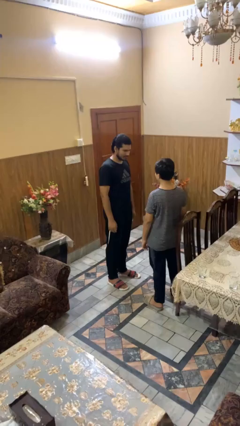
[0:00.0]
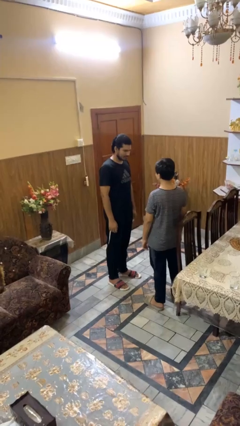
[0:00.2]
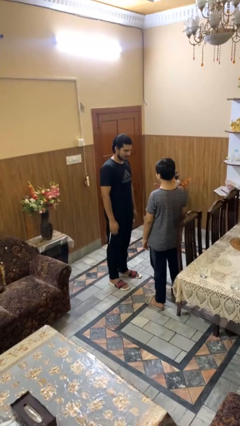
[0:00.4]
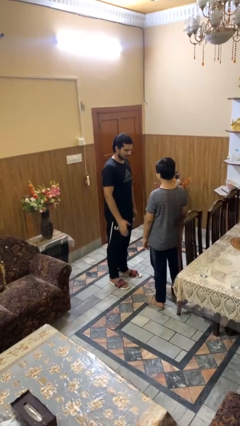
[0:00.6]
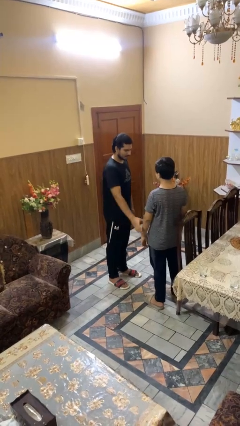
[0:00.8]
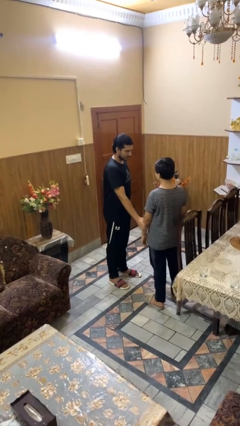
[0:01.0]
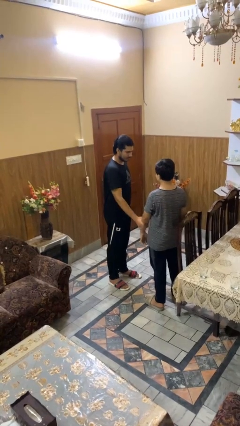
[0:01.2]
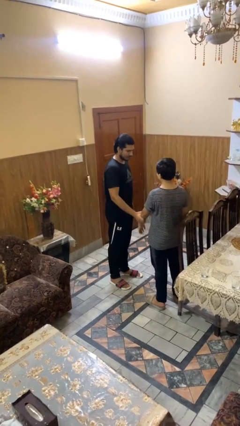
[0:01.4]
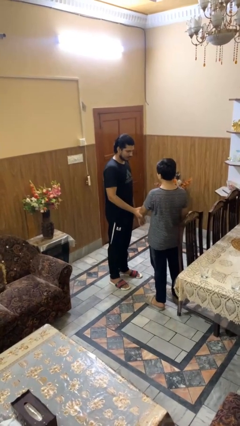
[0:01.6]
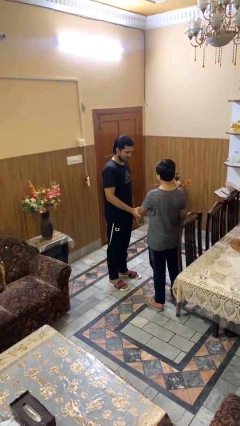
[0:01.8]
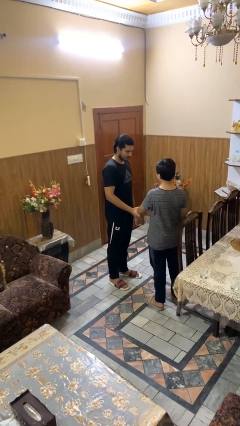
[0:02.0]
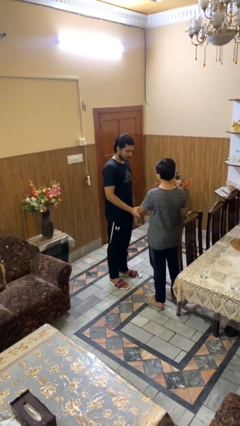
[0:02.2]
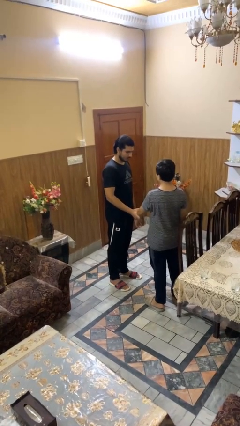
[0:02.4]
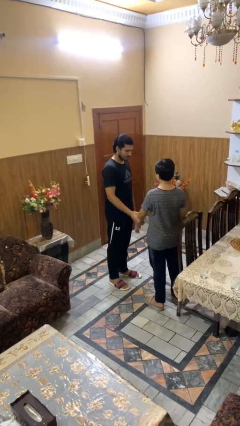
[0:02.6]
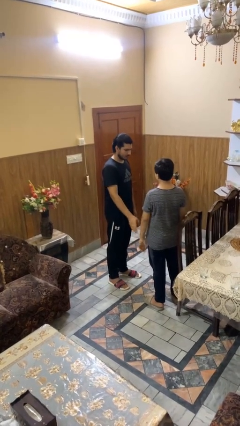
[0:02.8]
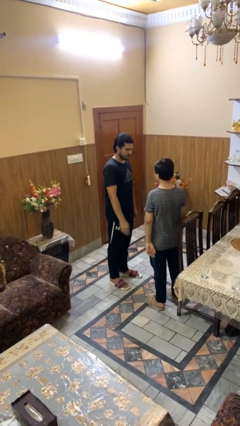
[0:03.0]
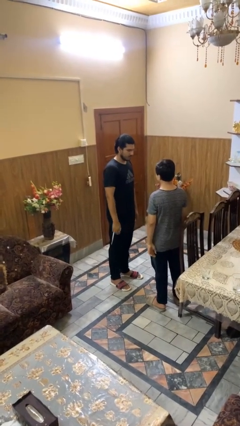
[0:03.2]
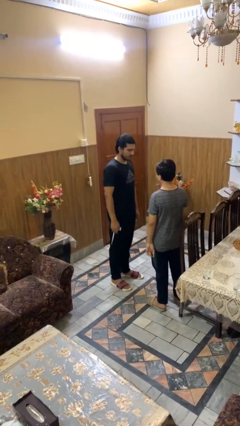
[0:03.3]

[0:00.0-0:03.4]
person grabs person by forearm

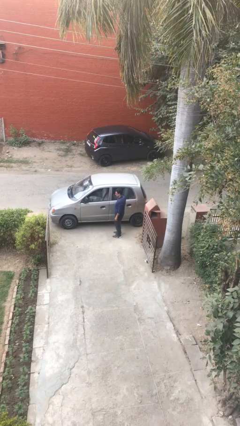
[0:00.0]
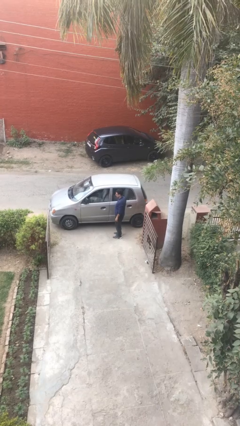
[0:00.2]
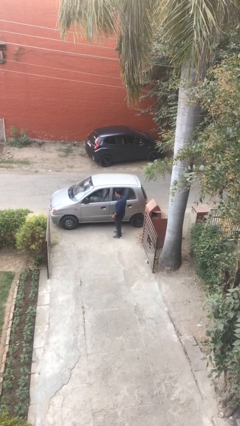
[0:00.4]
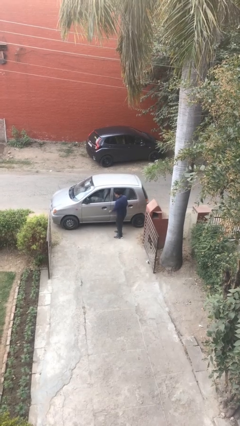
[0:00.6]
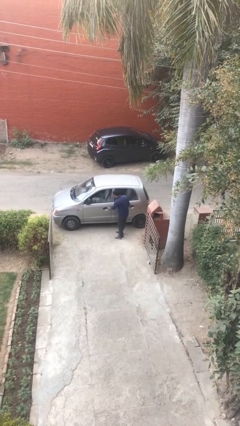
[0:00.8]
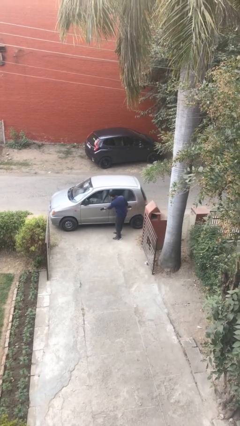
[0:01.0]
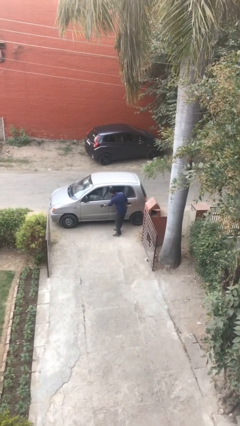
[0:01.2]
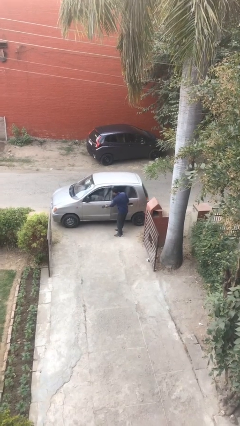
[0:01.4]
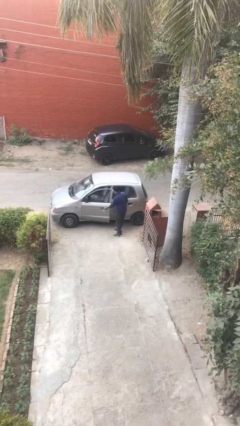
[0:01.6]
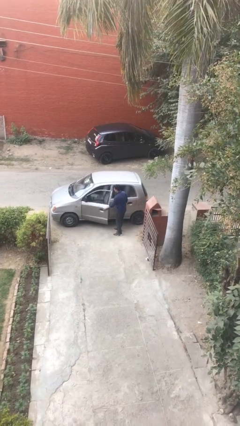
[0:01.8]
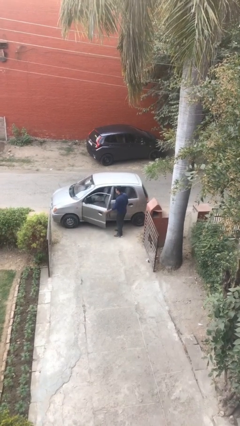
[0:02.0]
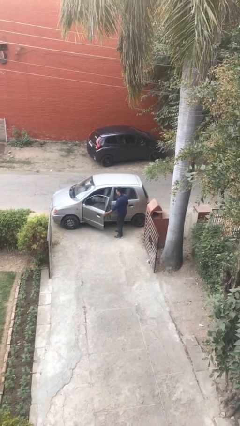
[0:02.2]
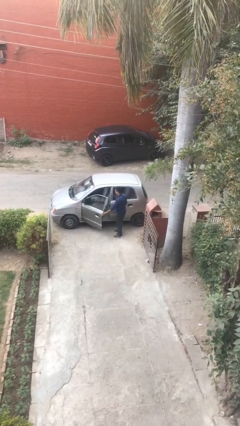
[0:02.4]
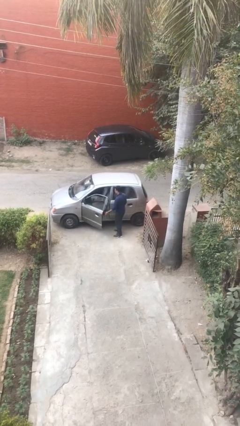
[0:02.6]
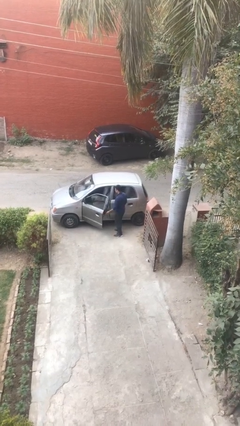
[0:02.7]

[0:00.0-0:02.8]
person opens car door

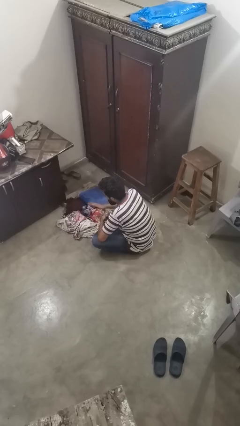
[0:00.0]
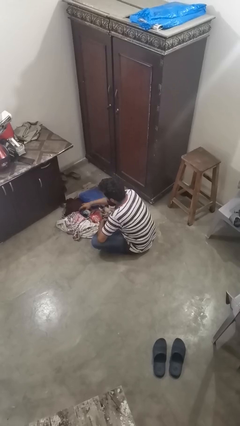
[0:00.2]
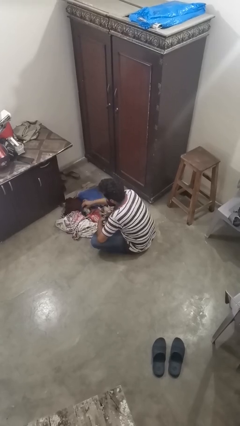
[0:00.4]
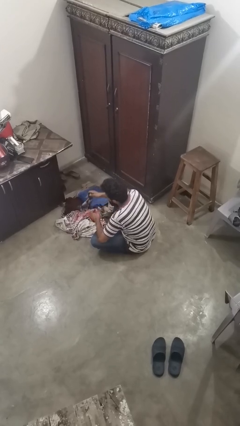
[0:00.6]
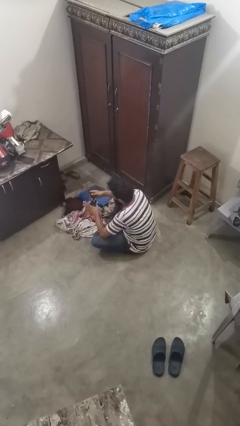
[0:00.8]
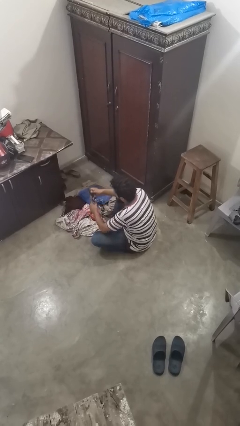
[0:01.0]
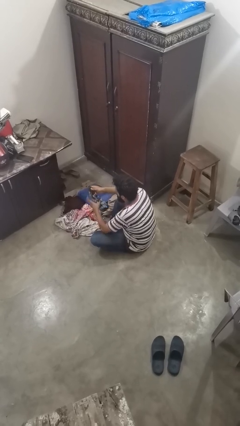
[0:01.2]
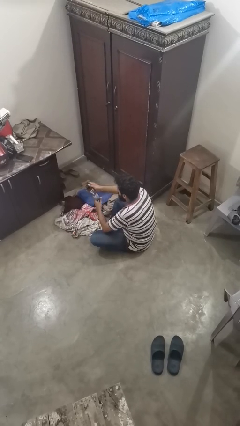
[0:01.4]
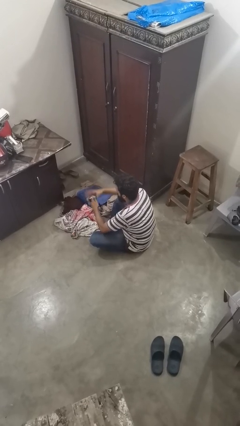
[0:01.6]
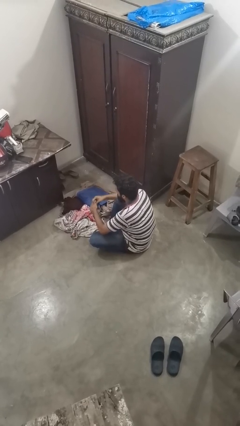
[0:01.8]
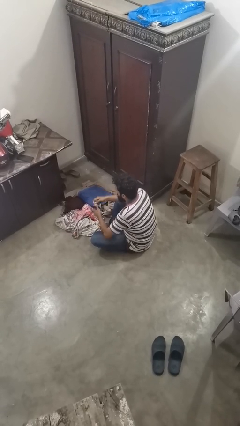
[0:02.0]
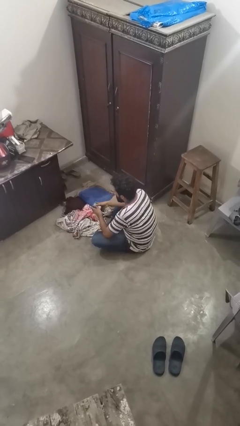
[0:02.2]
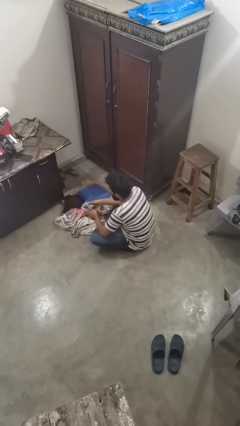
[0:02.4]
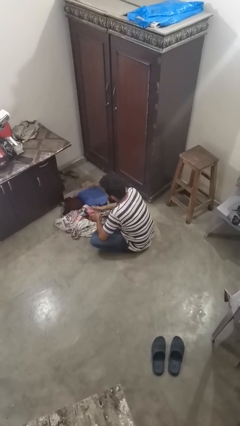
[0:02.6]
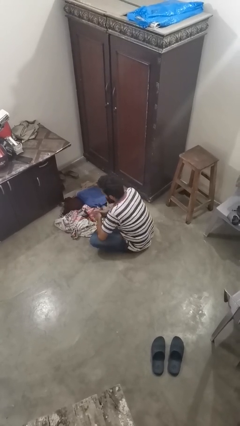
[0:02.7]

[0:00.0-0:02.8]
person folds socks

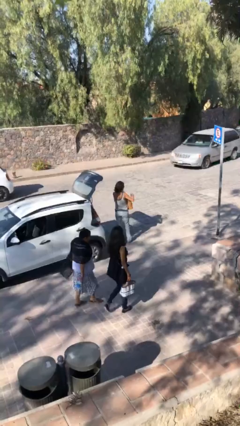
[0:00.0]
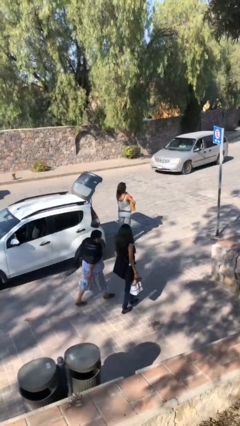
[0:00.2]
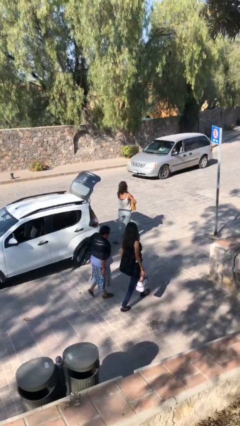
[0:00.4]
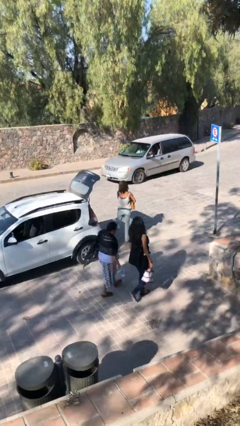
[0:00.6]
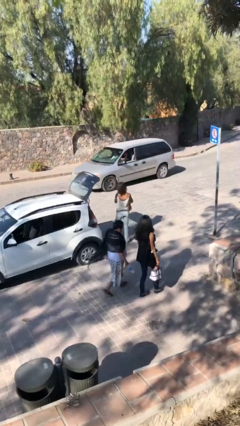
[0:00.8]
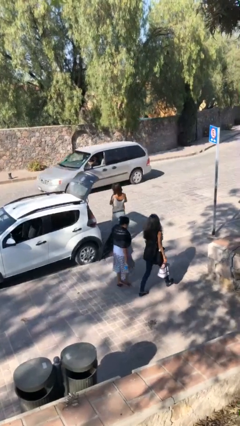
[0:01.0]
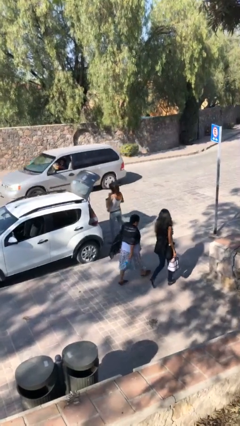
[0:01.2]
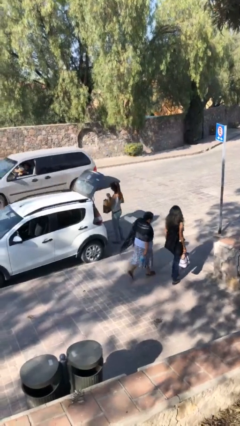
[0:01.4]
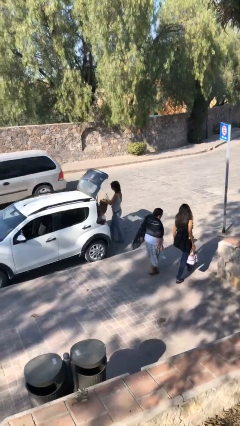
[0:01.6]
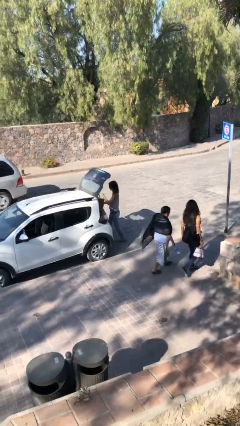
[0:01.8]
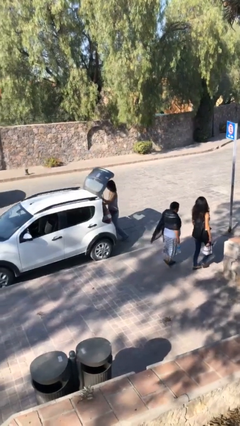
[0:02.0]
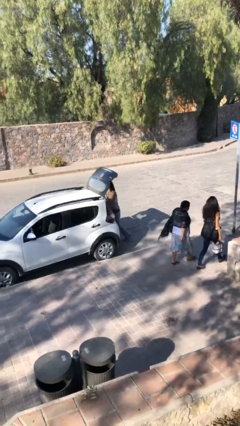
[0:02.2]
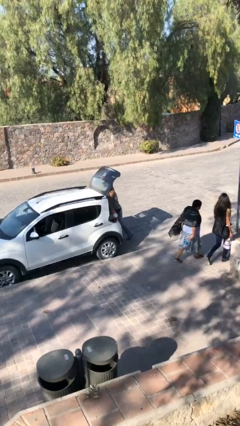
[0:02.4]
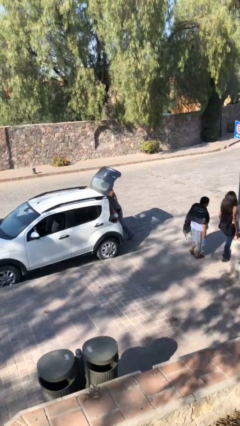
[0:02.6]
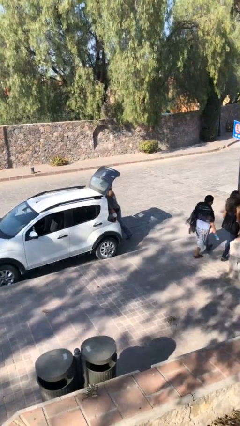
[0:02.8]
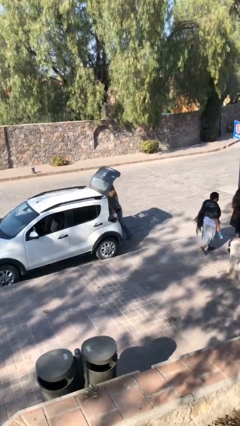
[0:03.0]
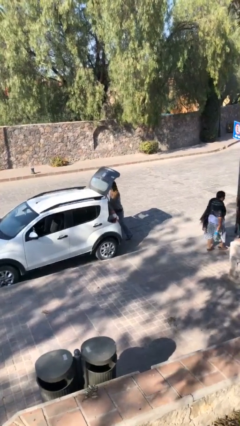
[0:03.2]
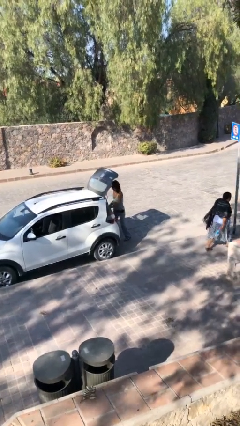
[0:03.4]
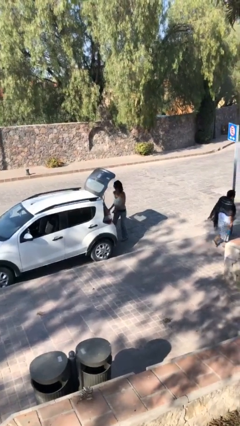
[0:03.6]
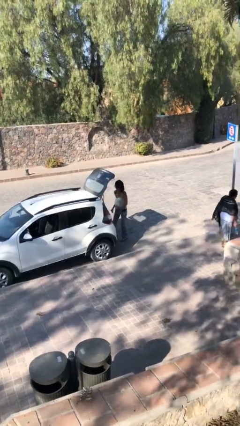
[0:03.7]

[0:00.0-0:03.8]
person loads car

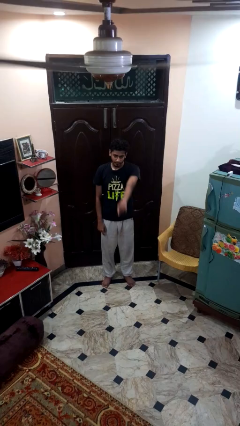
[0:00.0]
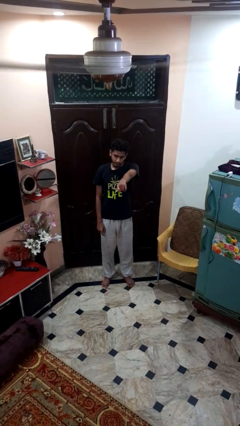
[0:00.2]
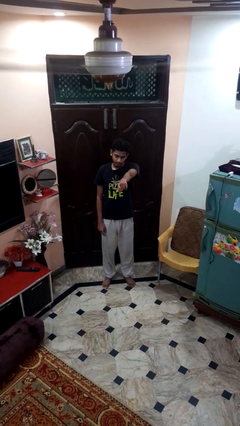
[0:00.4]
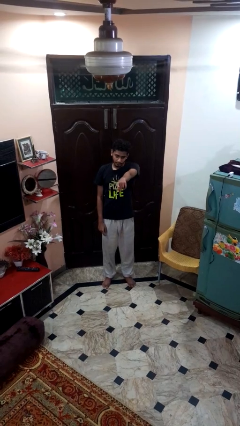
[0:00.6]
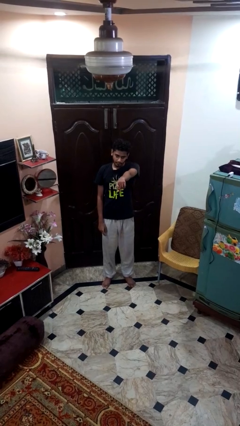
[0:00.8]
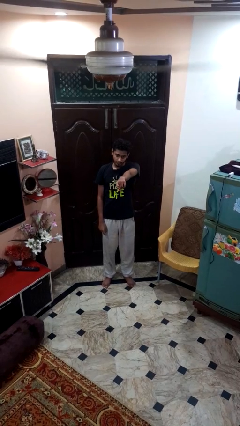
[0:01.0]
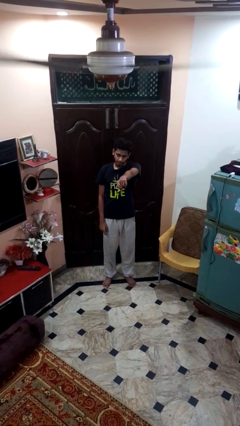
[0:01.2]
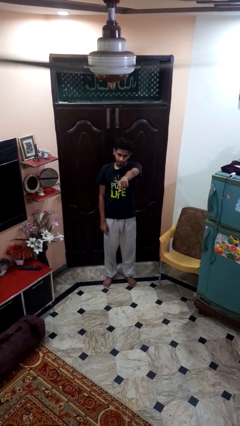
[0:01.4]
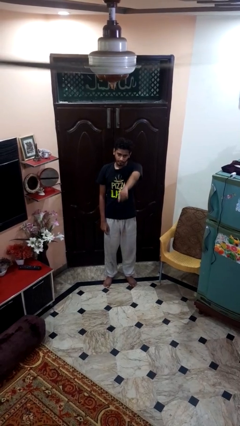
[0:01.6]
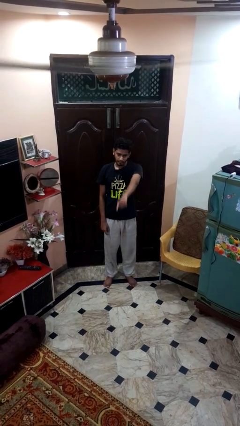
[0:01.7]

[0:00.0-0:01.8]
person points at person

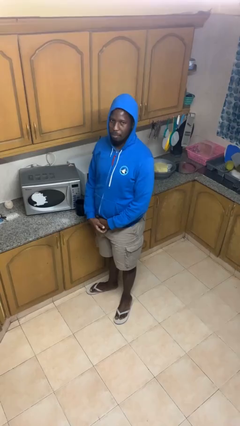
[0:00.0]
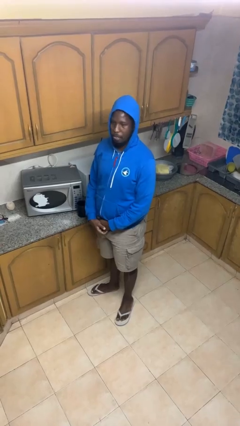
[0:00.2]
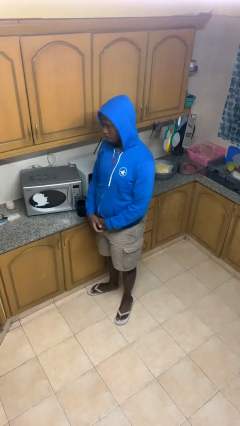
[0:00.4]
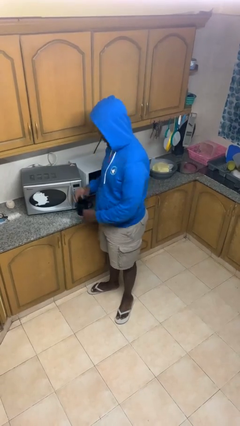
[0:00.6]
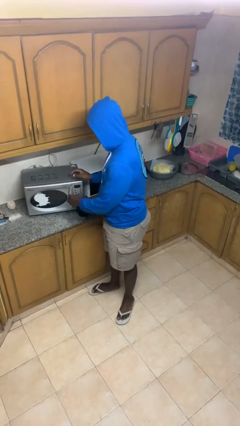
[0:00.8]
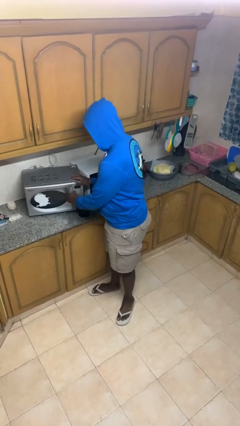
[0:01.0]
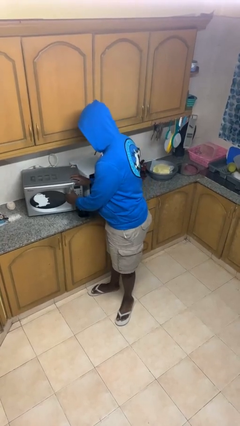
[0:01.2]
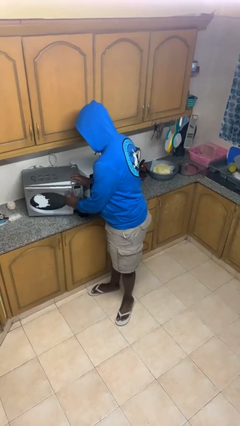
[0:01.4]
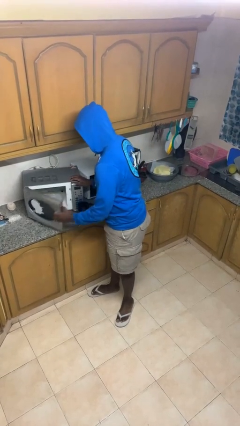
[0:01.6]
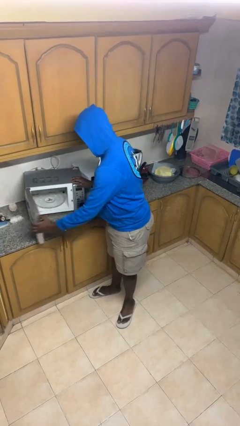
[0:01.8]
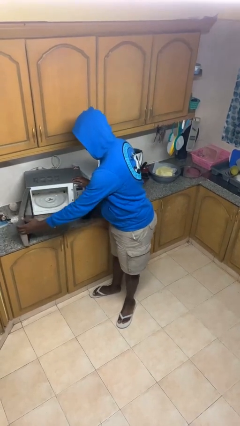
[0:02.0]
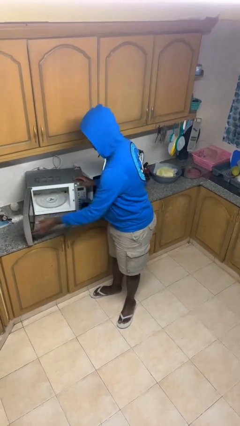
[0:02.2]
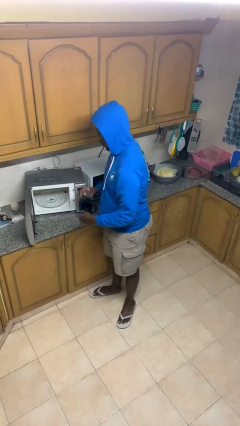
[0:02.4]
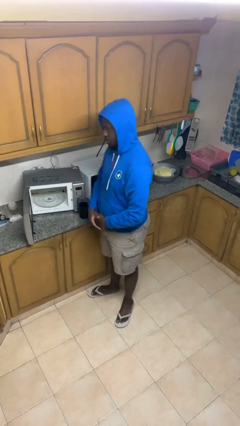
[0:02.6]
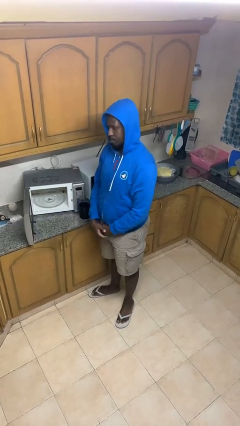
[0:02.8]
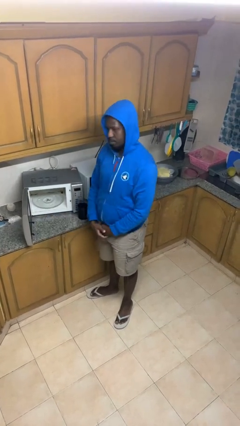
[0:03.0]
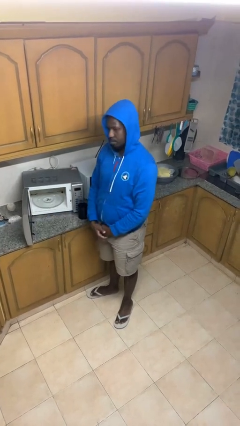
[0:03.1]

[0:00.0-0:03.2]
person opens microwave
